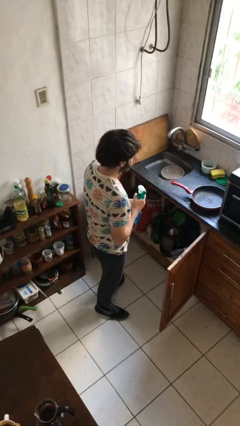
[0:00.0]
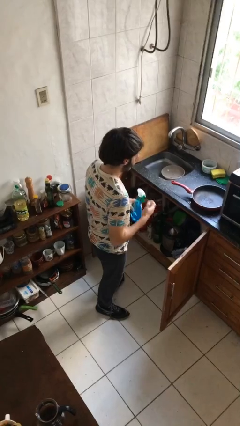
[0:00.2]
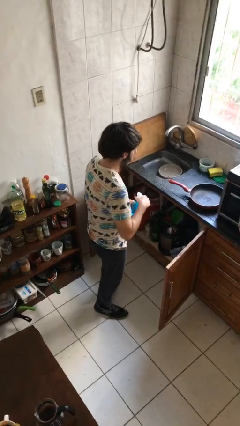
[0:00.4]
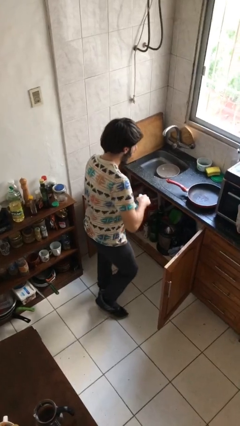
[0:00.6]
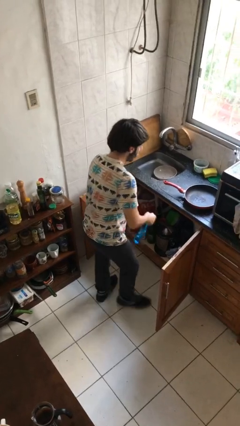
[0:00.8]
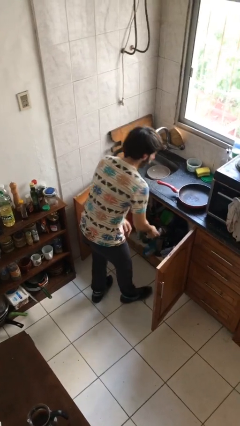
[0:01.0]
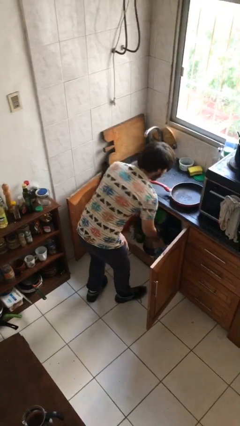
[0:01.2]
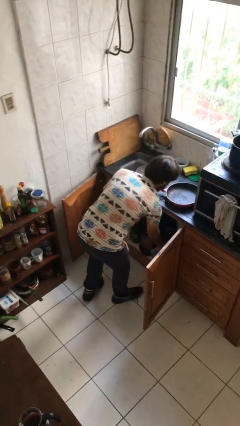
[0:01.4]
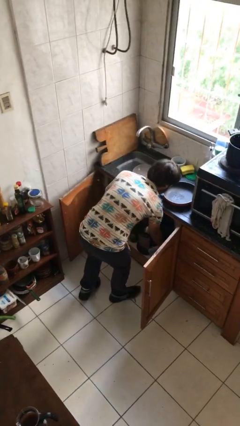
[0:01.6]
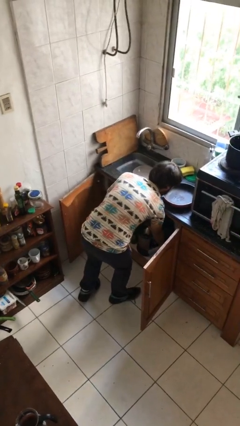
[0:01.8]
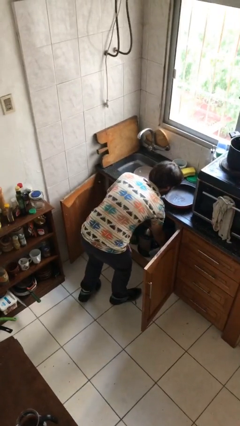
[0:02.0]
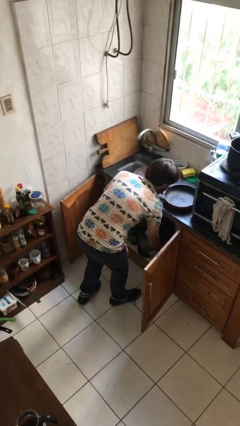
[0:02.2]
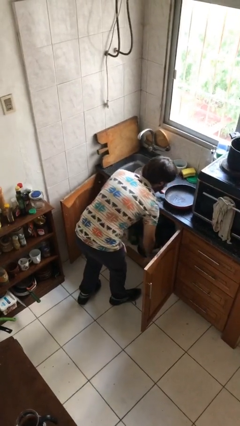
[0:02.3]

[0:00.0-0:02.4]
person puts down object into cabinet

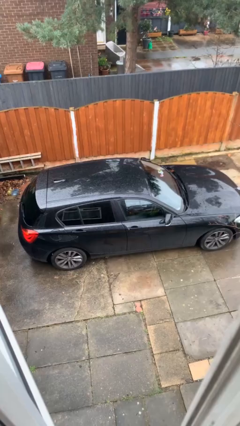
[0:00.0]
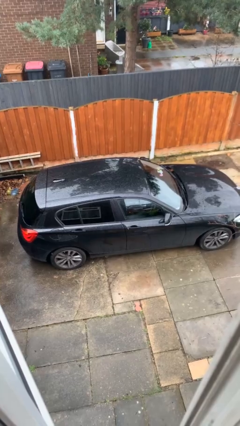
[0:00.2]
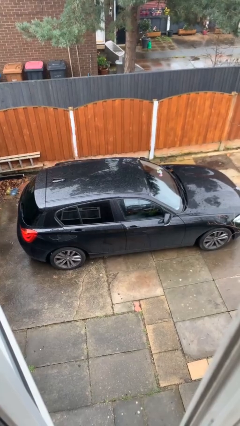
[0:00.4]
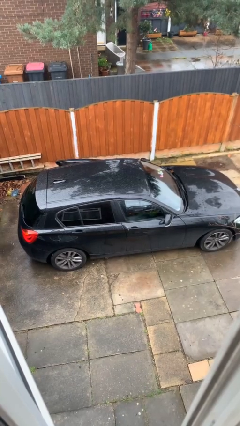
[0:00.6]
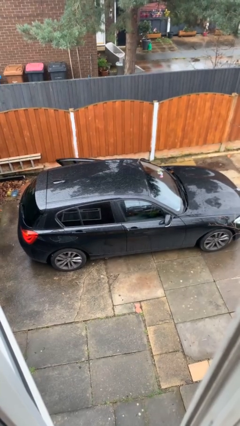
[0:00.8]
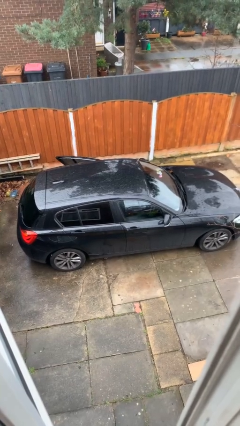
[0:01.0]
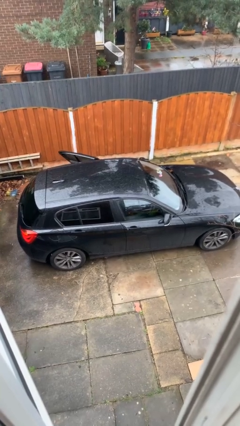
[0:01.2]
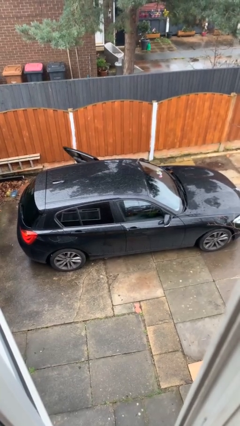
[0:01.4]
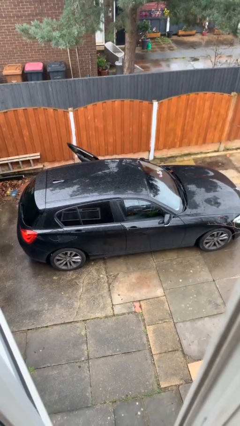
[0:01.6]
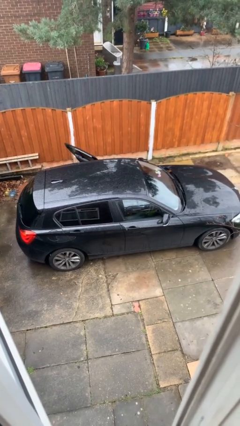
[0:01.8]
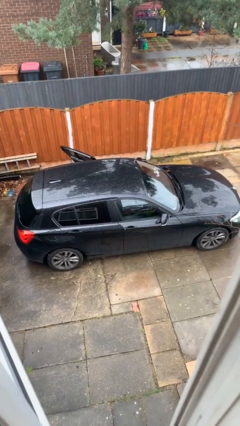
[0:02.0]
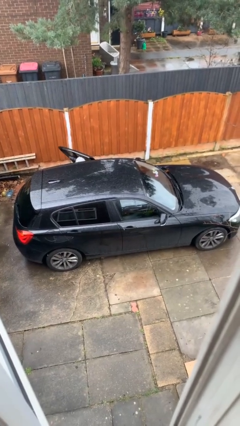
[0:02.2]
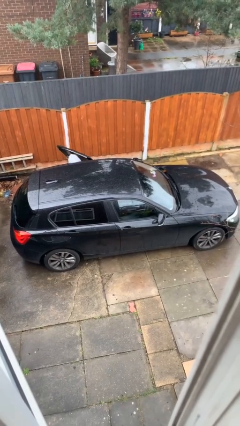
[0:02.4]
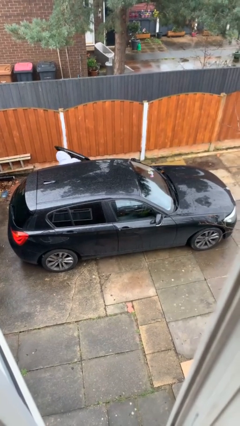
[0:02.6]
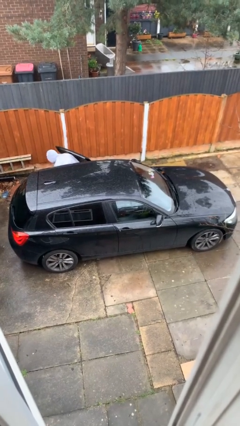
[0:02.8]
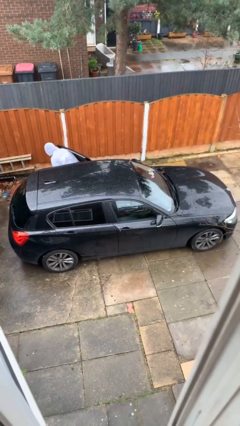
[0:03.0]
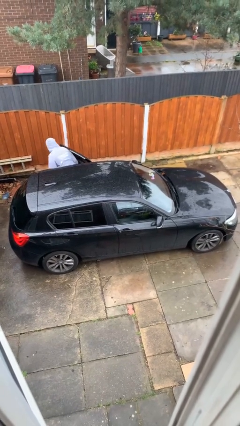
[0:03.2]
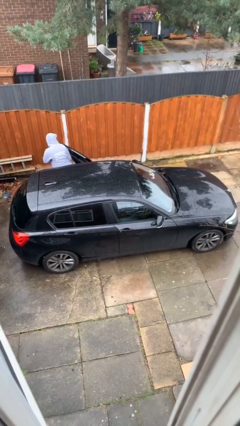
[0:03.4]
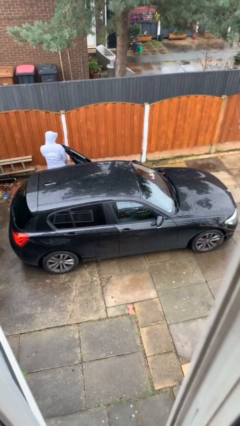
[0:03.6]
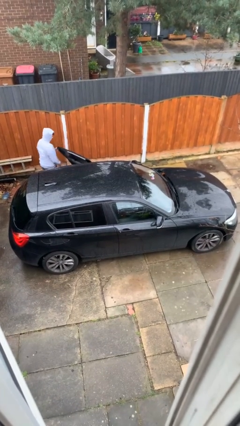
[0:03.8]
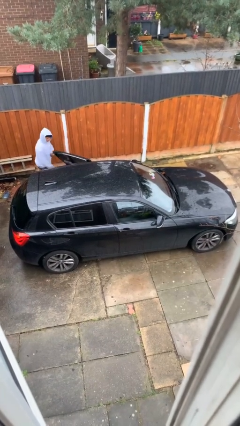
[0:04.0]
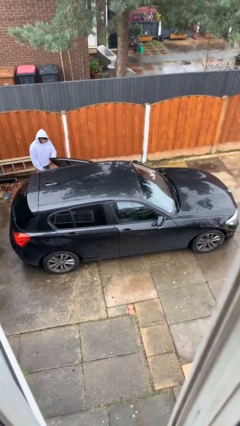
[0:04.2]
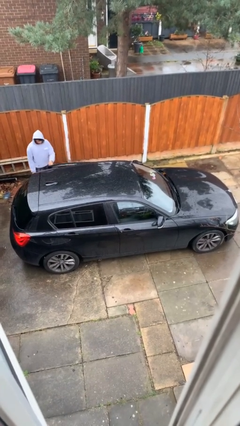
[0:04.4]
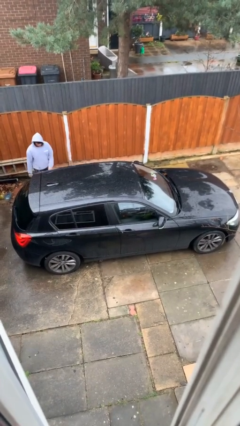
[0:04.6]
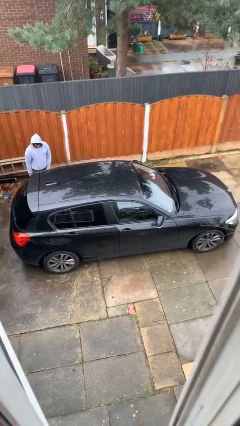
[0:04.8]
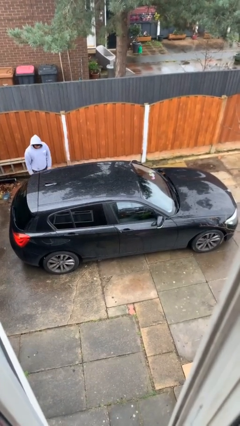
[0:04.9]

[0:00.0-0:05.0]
car drops off person

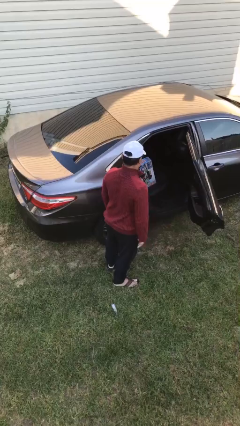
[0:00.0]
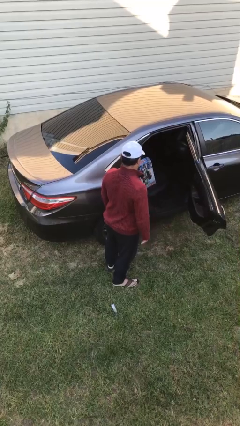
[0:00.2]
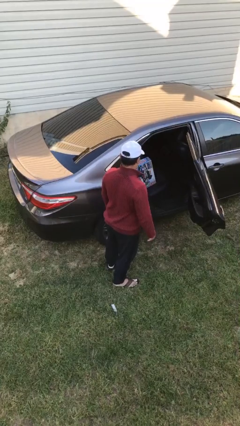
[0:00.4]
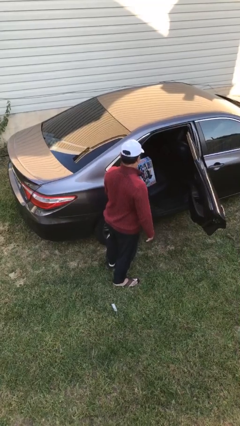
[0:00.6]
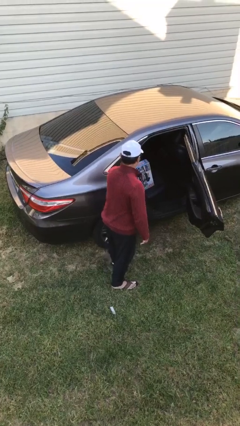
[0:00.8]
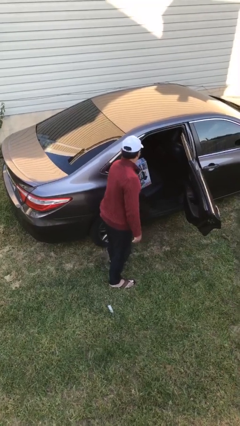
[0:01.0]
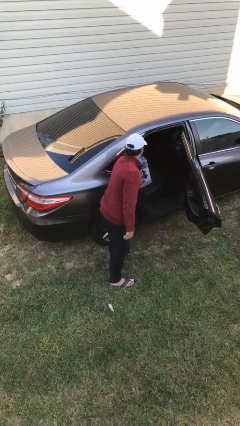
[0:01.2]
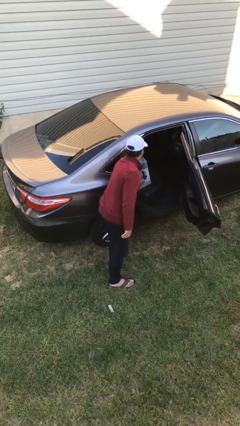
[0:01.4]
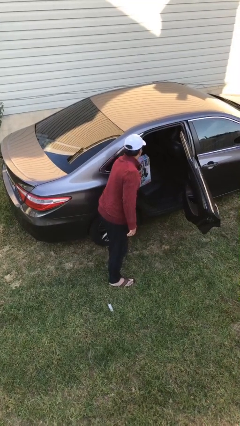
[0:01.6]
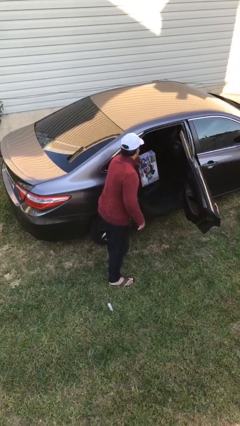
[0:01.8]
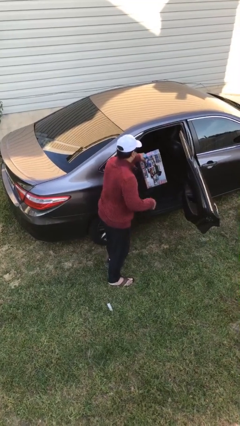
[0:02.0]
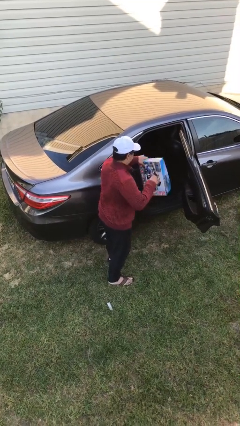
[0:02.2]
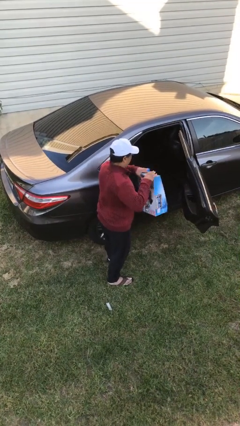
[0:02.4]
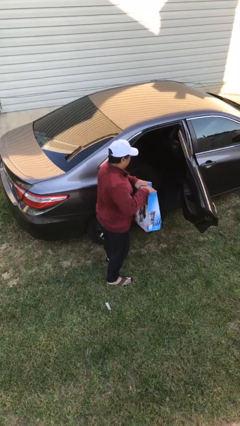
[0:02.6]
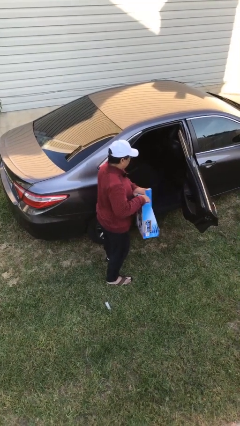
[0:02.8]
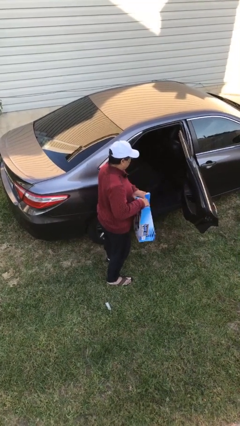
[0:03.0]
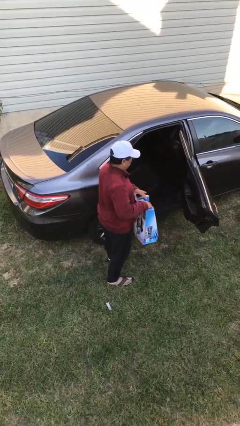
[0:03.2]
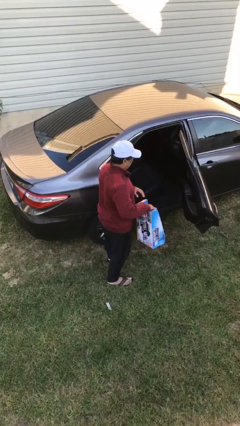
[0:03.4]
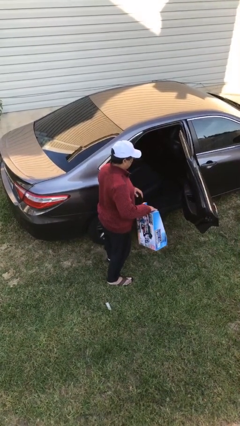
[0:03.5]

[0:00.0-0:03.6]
person unloads car

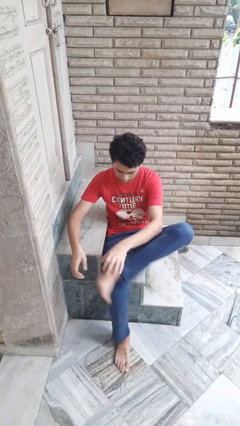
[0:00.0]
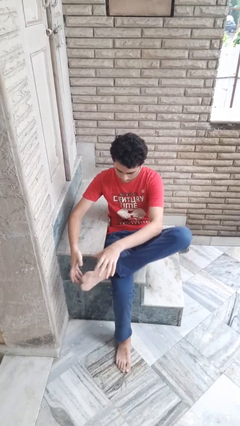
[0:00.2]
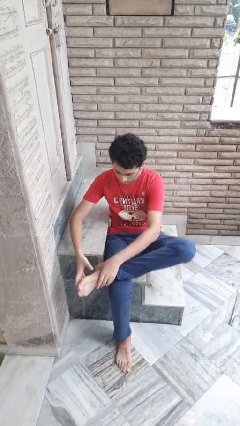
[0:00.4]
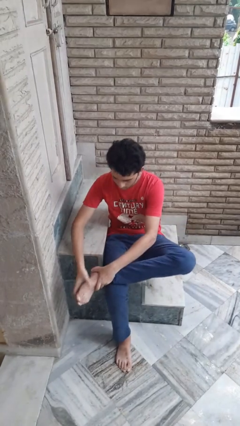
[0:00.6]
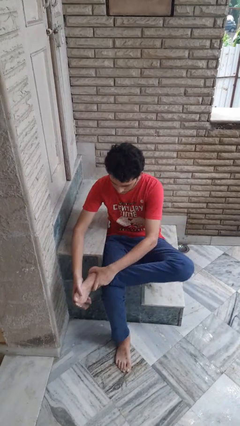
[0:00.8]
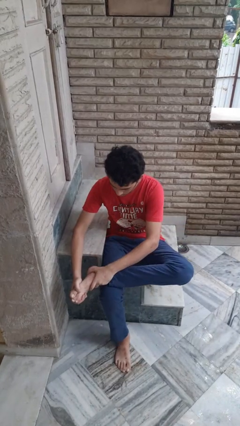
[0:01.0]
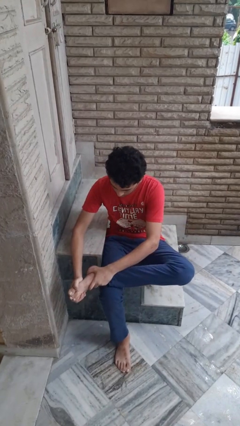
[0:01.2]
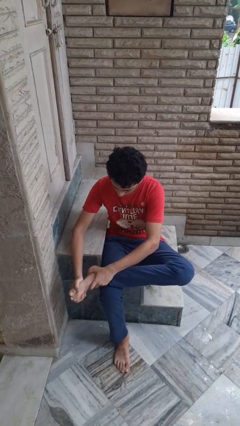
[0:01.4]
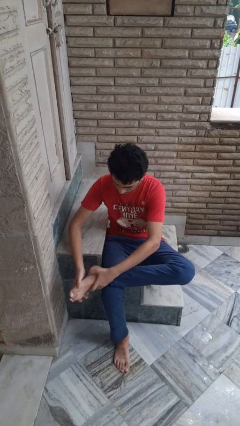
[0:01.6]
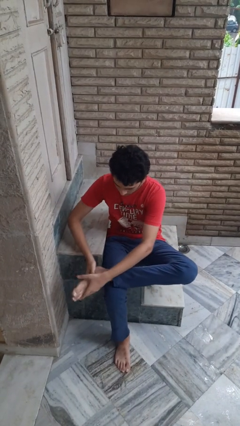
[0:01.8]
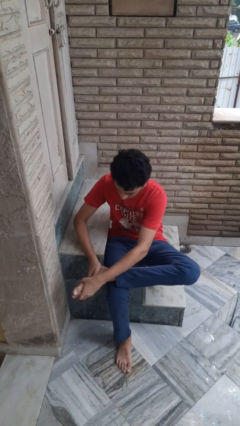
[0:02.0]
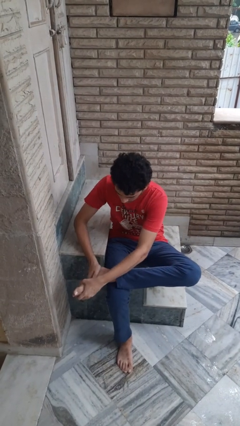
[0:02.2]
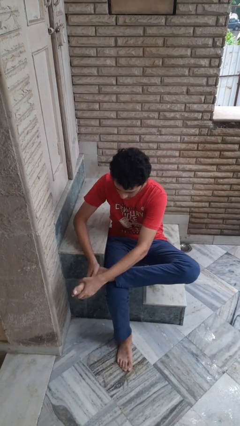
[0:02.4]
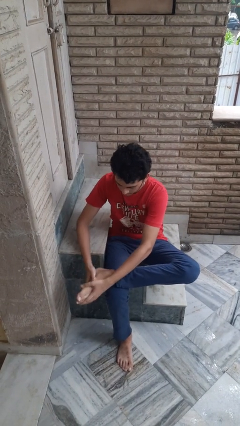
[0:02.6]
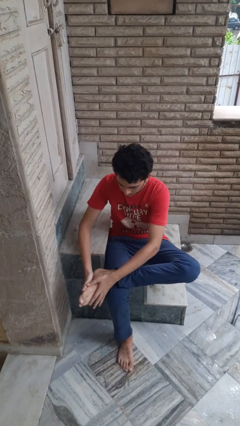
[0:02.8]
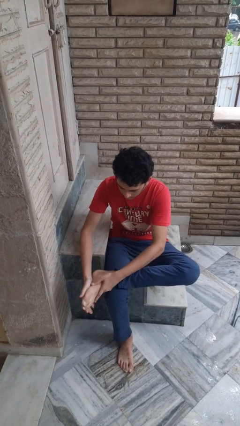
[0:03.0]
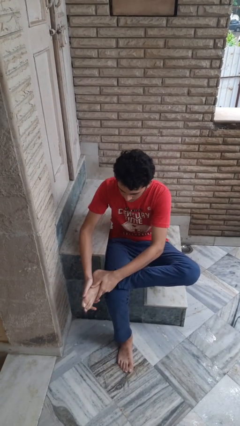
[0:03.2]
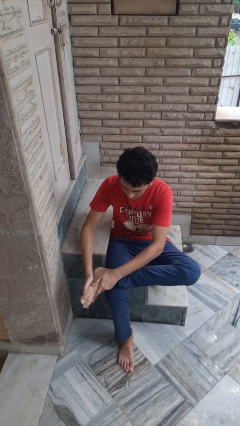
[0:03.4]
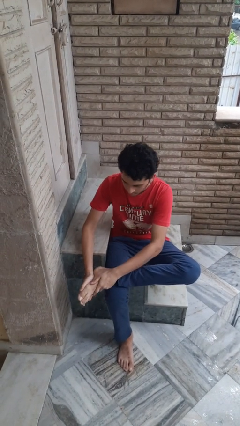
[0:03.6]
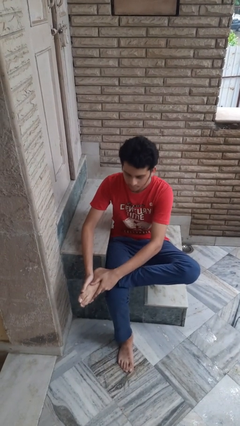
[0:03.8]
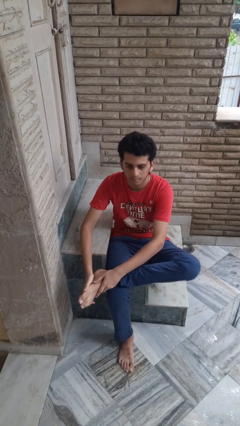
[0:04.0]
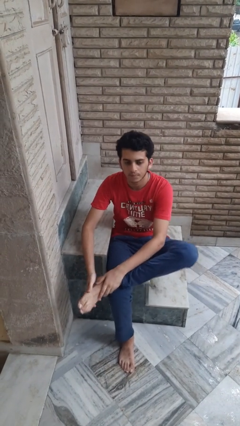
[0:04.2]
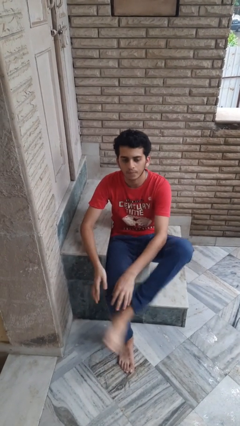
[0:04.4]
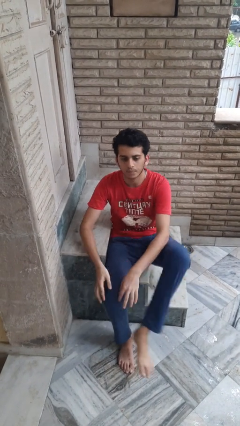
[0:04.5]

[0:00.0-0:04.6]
person rubs foot

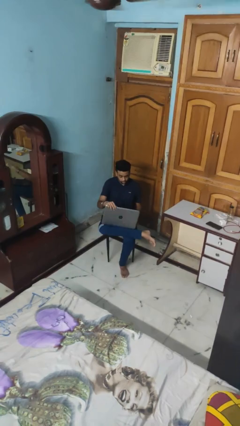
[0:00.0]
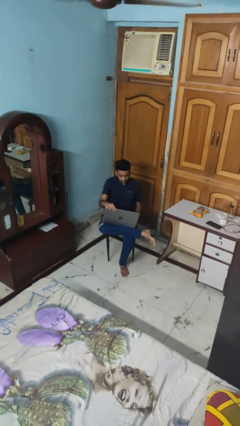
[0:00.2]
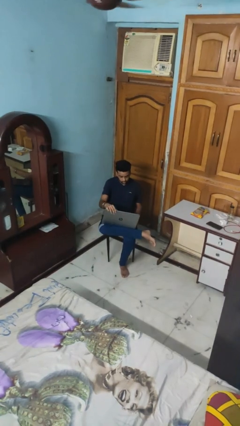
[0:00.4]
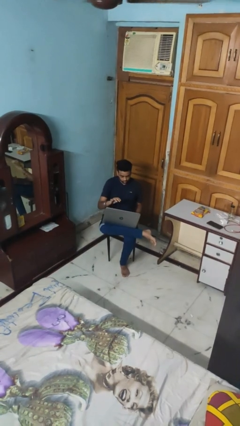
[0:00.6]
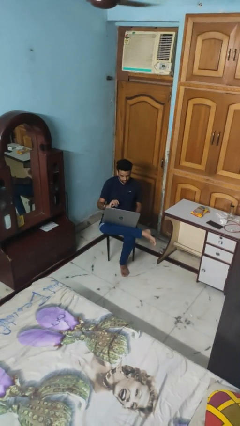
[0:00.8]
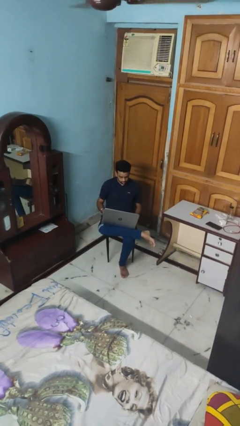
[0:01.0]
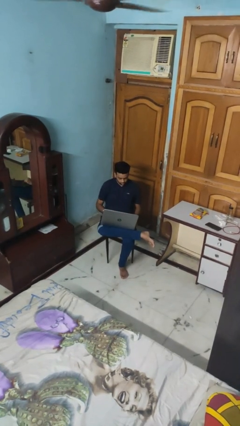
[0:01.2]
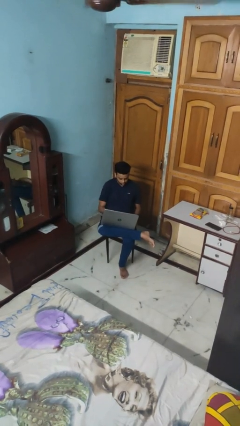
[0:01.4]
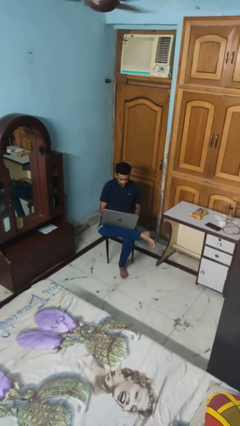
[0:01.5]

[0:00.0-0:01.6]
person opens laptop

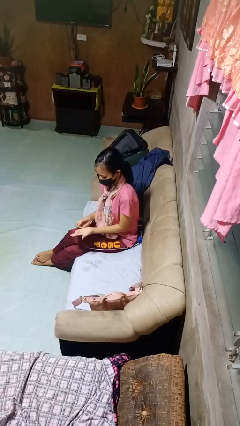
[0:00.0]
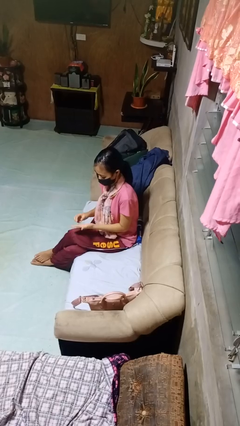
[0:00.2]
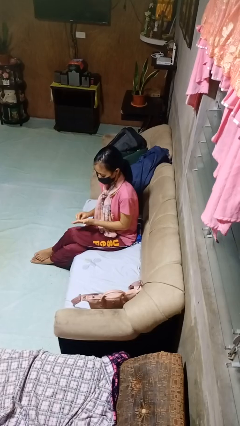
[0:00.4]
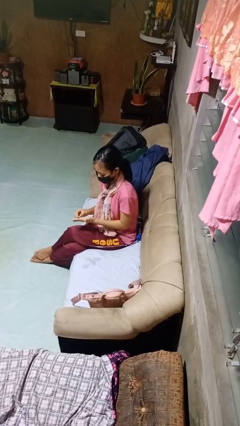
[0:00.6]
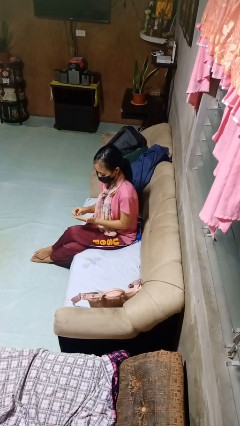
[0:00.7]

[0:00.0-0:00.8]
person puts on ring
